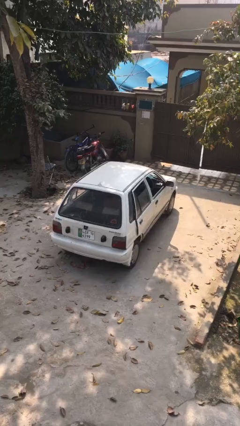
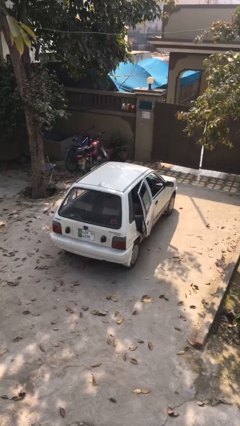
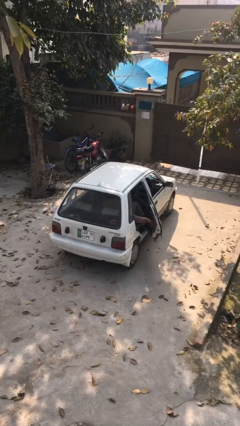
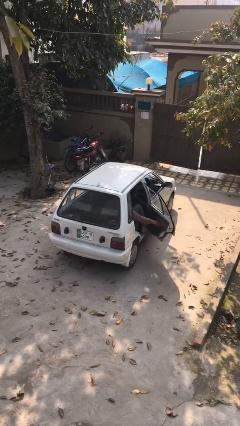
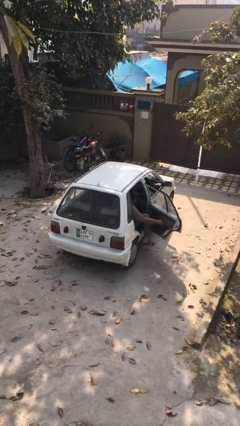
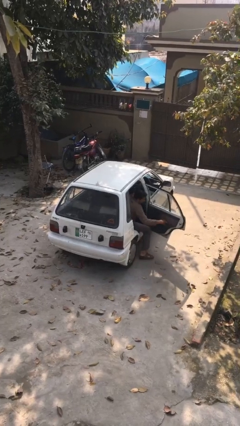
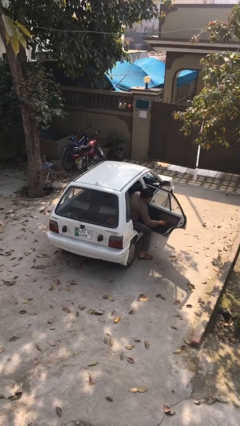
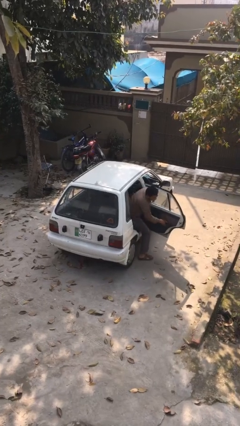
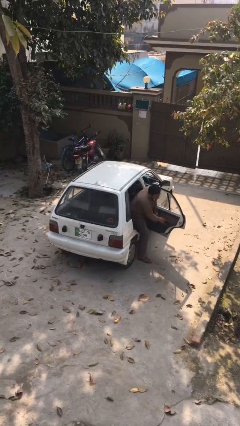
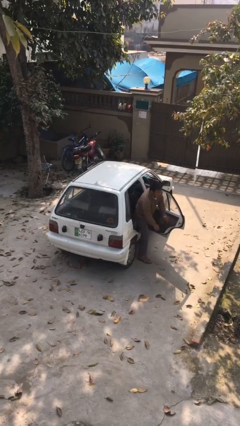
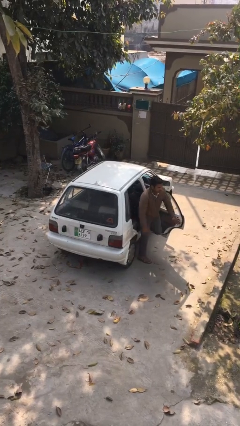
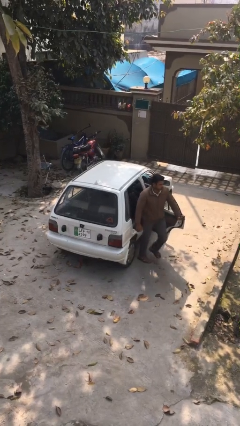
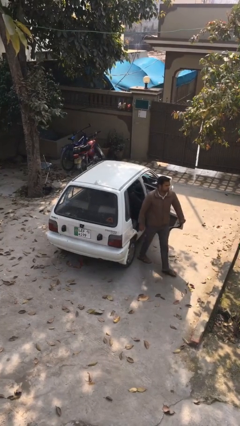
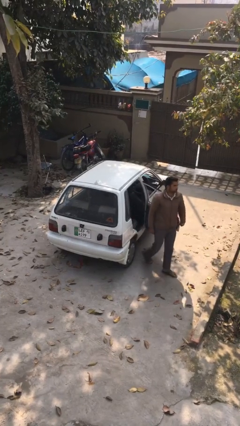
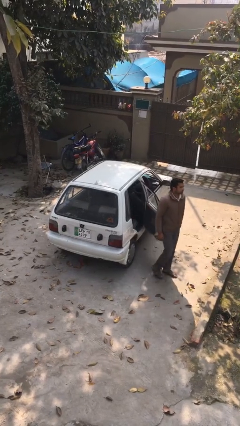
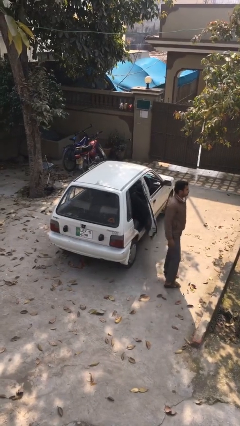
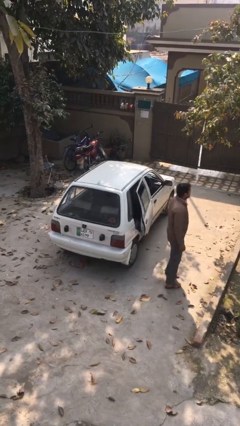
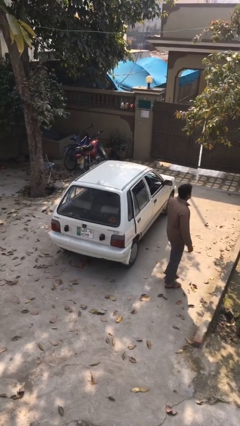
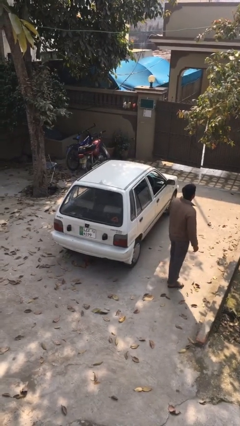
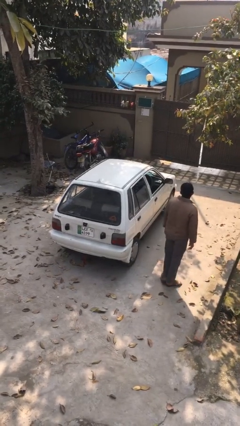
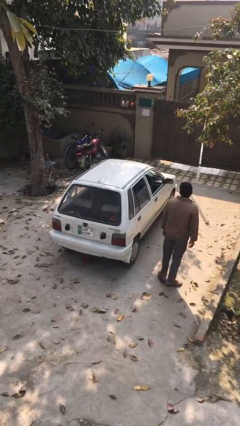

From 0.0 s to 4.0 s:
car drops off person

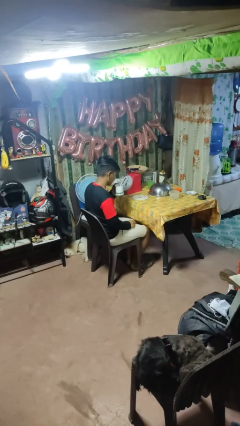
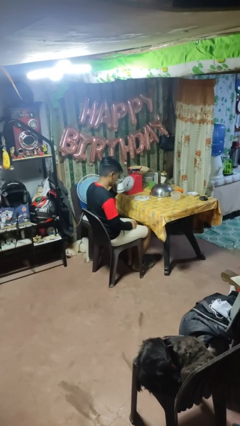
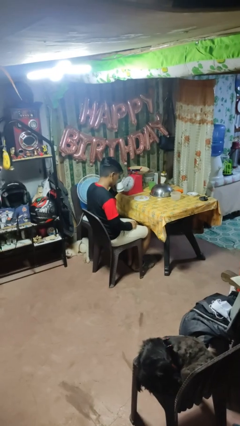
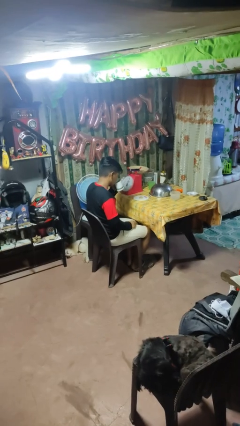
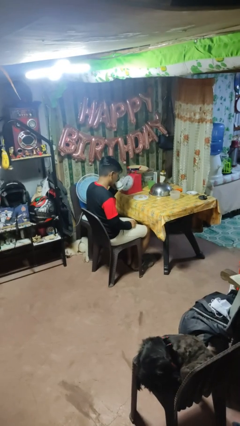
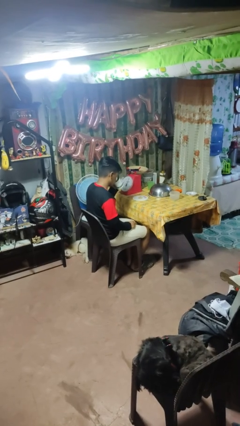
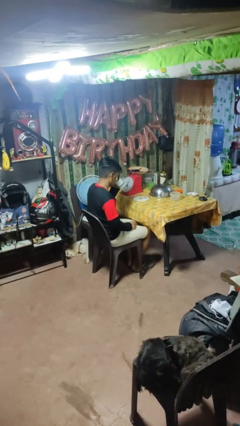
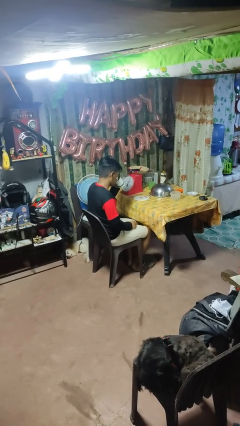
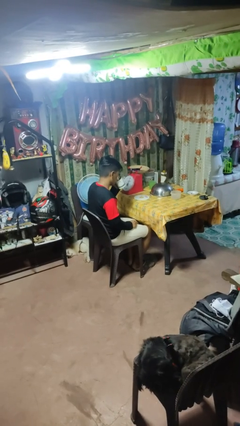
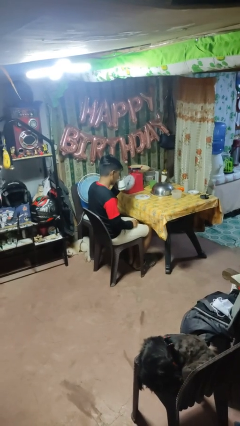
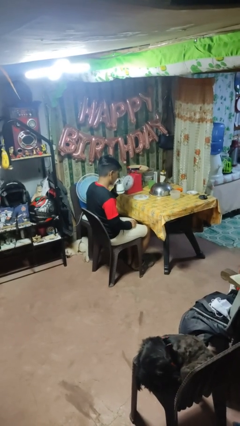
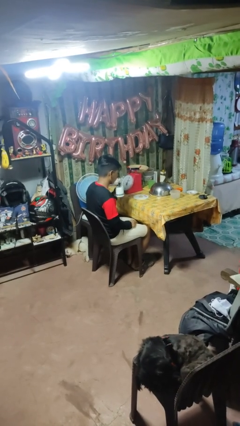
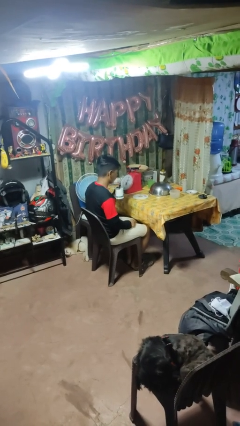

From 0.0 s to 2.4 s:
person drinks from mug

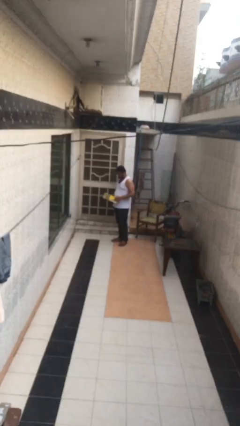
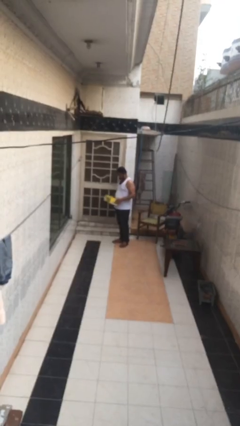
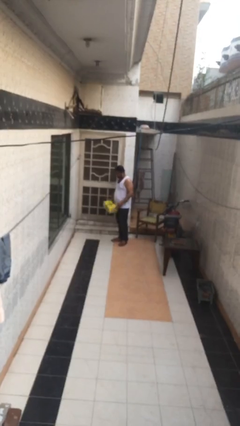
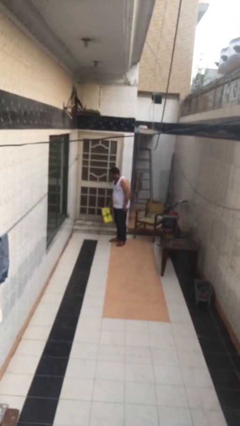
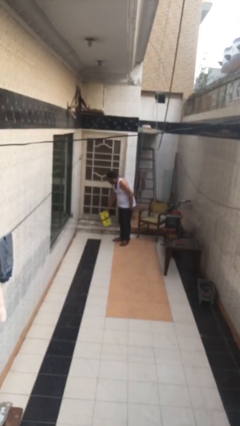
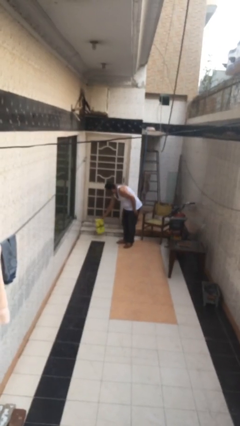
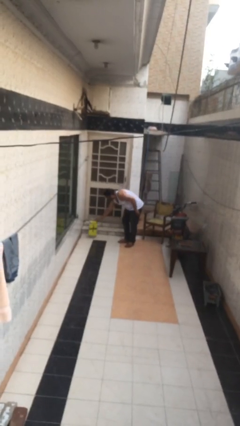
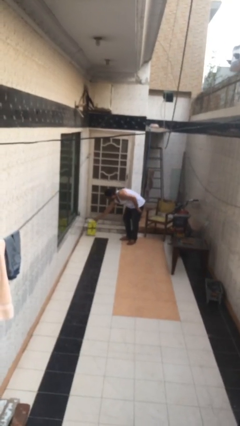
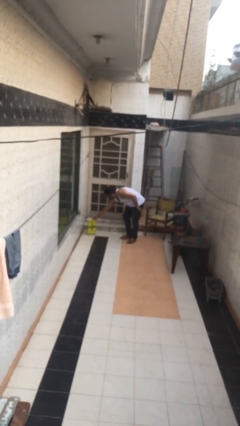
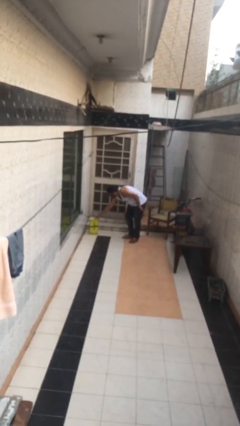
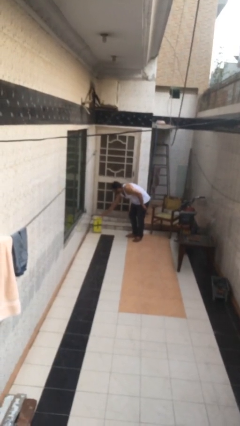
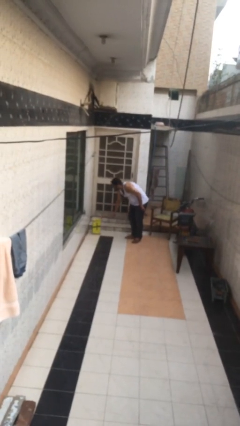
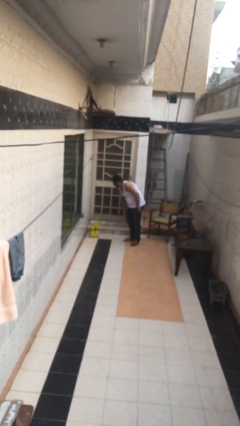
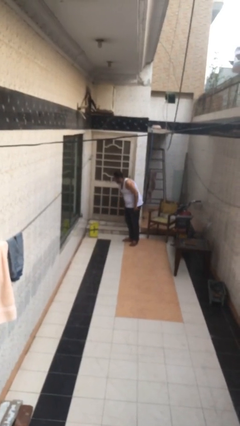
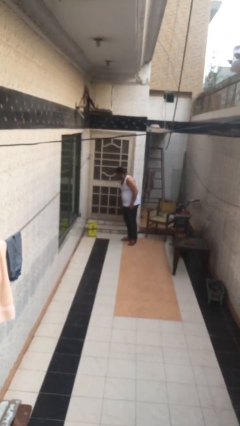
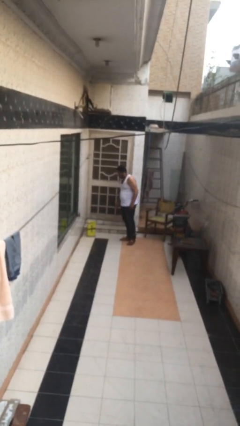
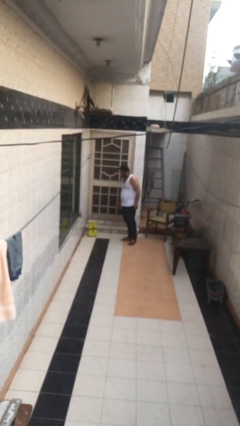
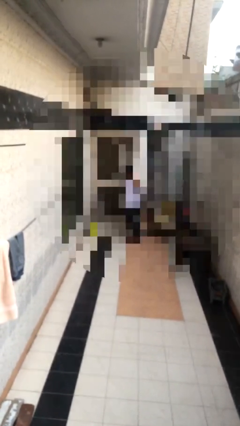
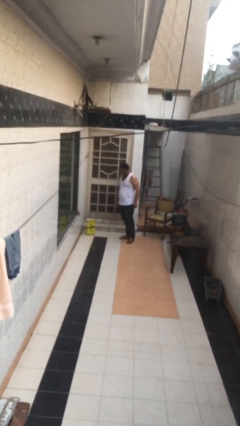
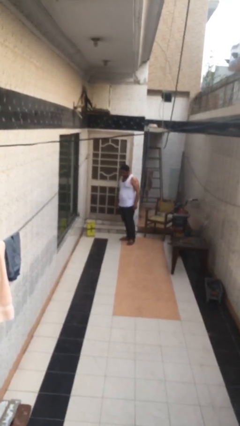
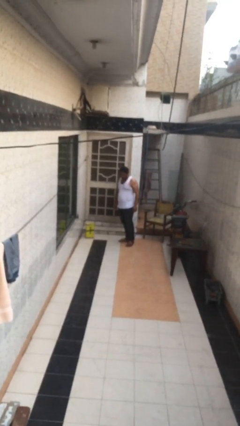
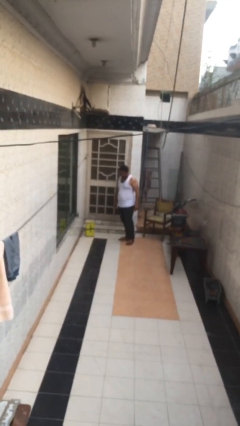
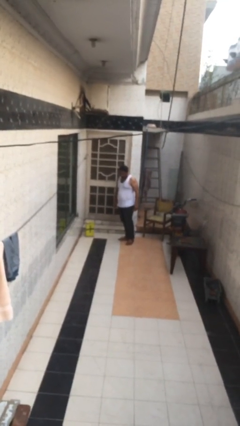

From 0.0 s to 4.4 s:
person puts down object on floor

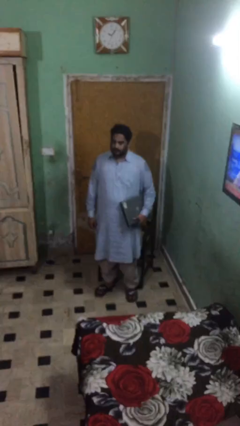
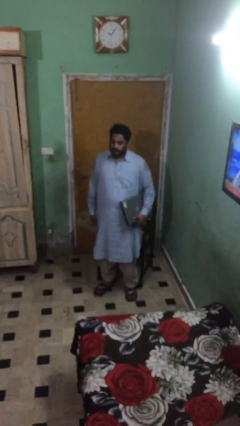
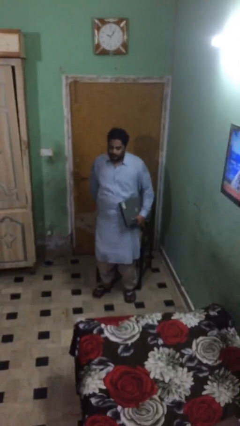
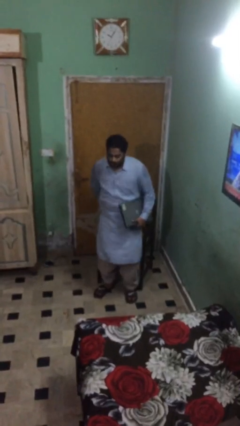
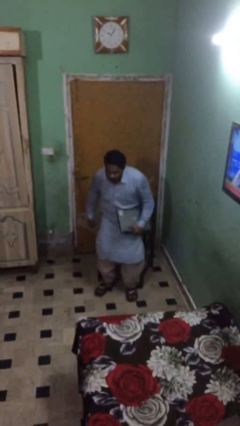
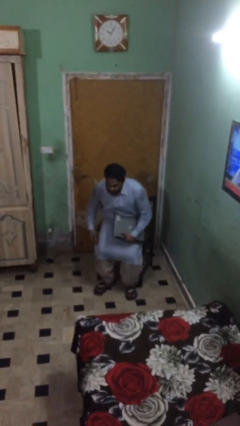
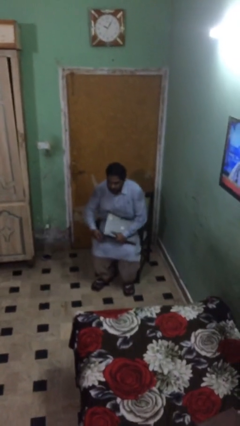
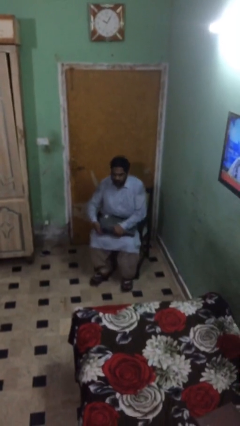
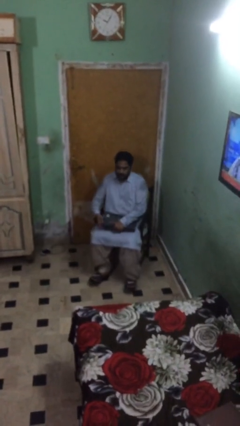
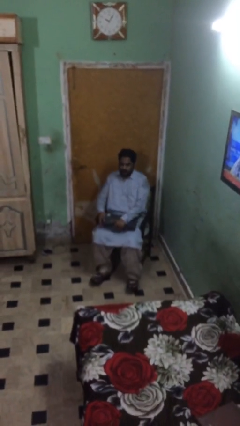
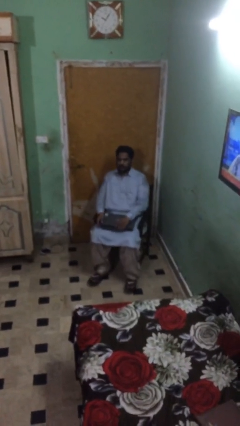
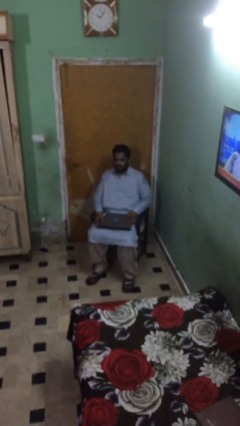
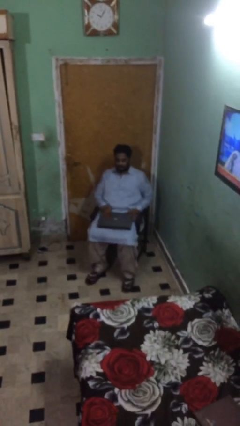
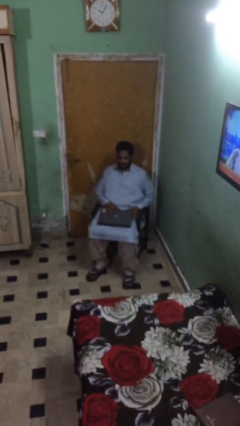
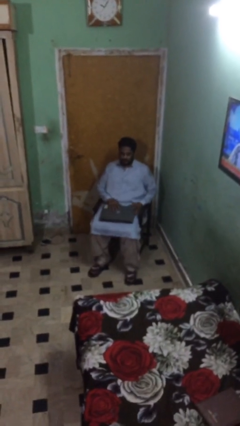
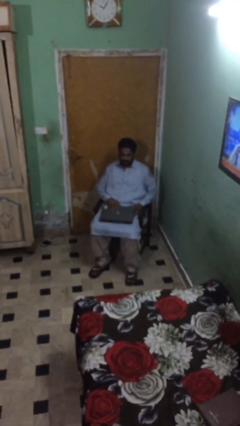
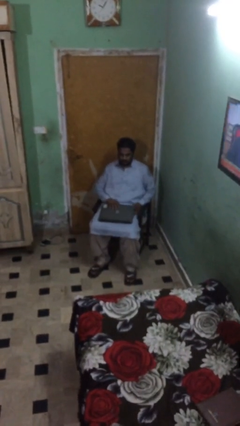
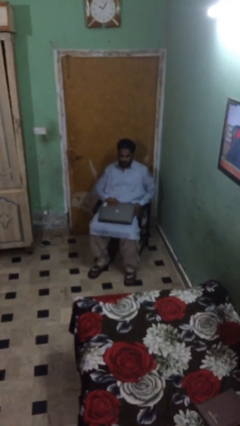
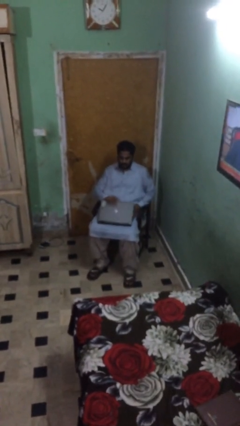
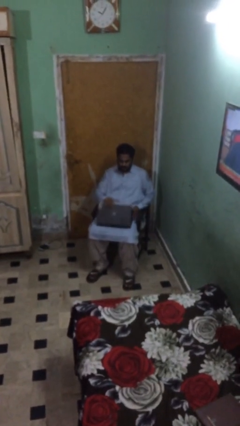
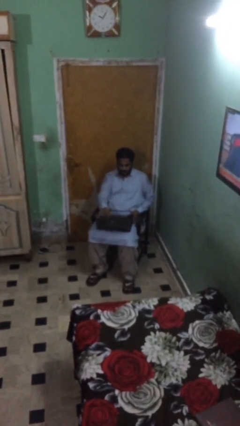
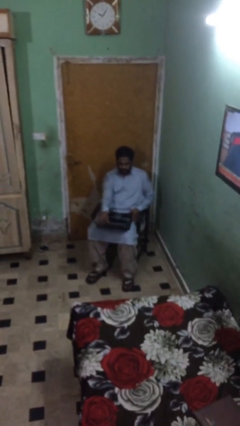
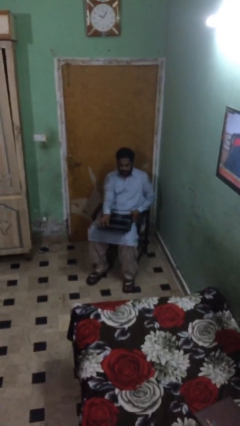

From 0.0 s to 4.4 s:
person sits down

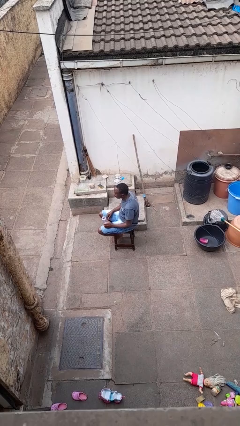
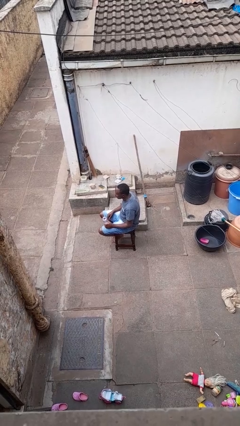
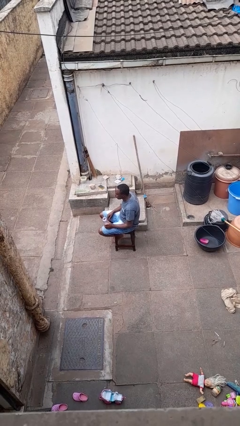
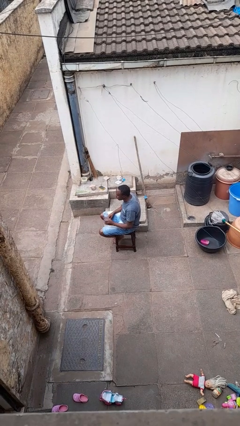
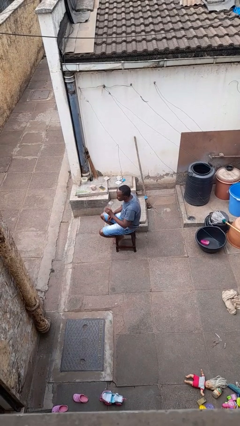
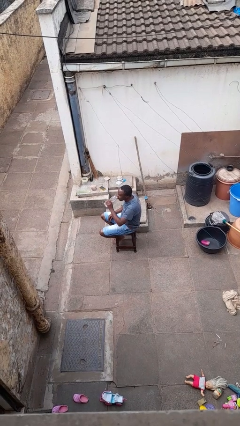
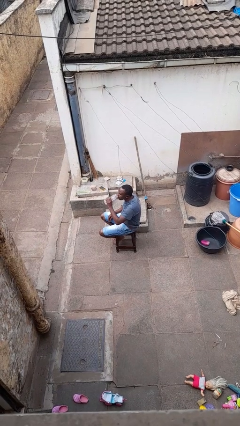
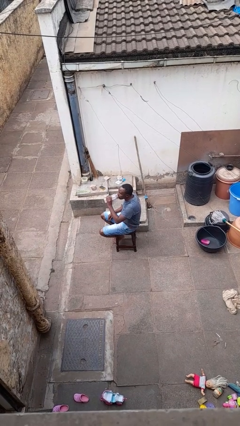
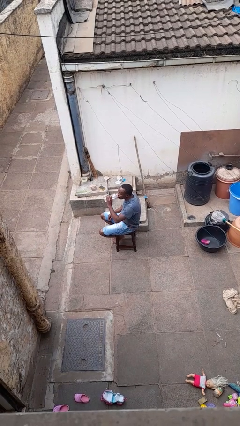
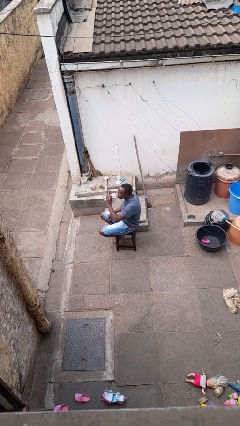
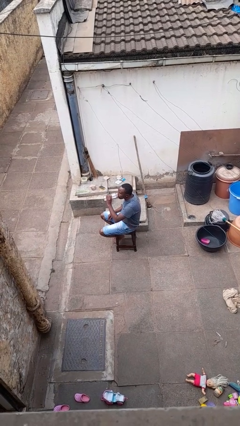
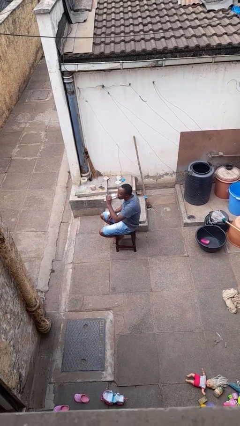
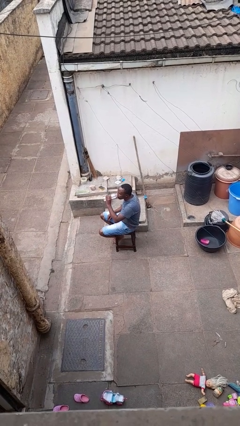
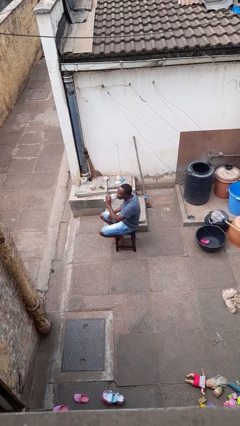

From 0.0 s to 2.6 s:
person drinks from bottle
